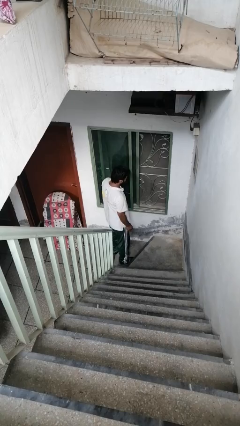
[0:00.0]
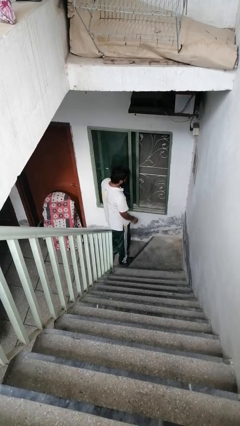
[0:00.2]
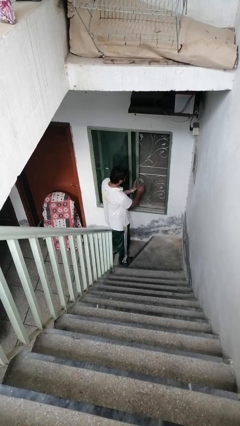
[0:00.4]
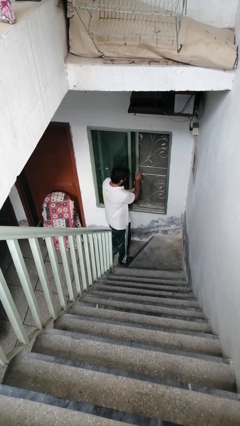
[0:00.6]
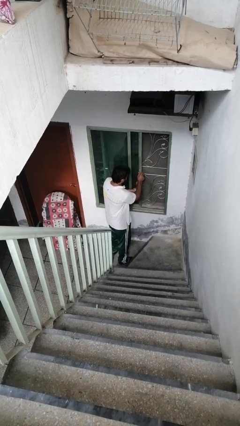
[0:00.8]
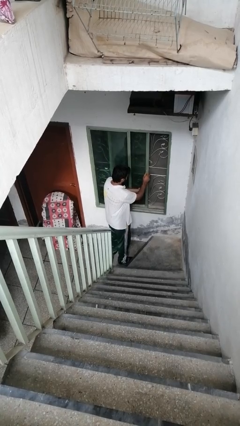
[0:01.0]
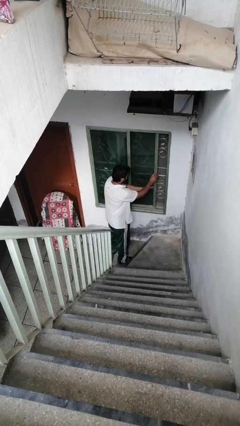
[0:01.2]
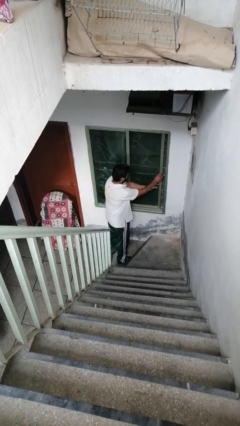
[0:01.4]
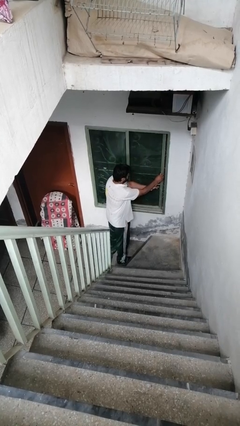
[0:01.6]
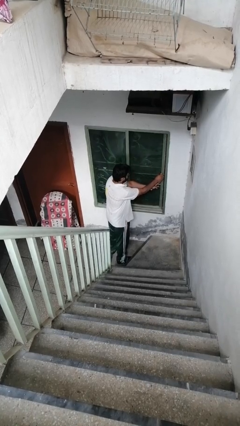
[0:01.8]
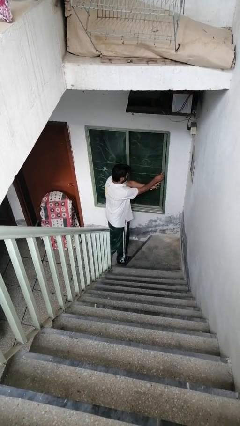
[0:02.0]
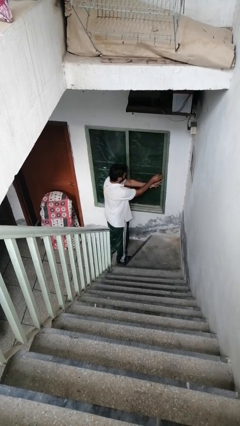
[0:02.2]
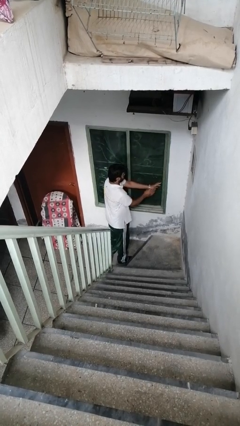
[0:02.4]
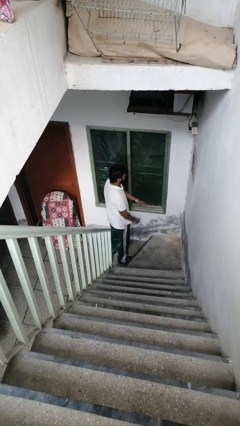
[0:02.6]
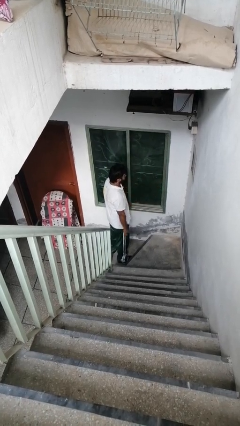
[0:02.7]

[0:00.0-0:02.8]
person closes home window

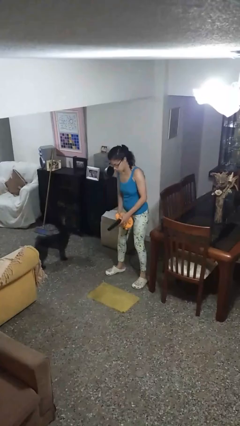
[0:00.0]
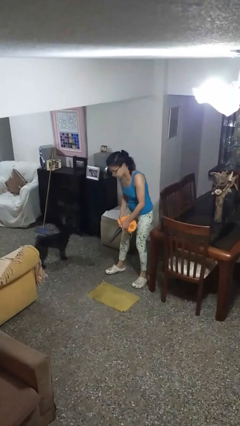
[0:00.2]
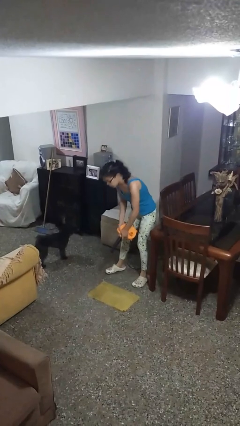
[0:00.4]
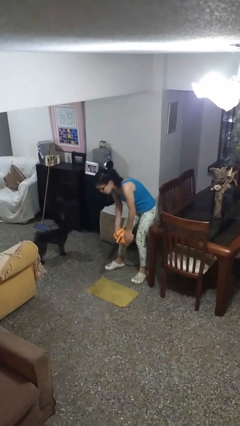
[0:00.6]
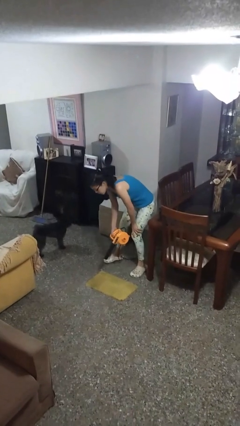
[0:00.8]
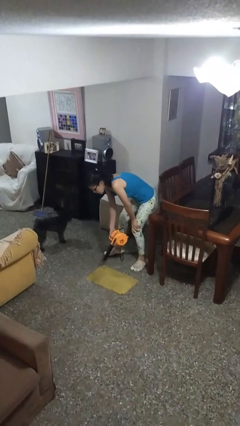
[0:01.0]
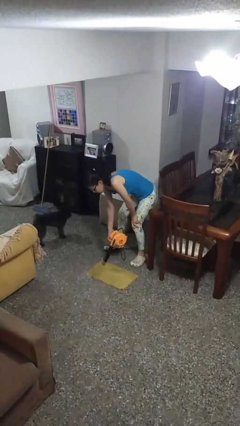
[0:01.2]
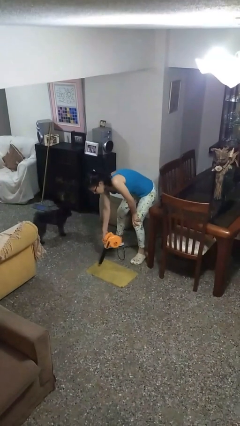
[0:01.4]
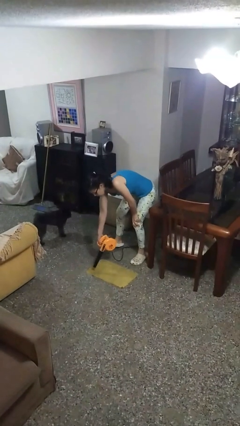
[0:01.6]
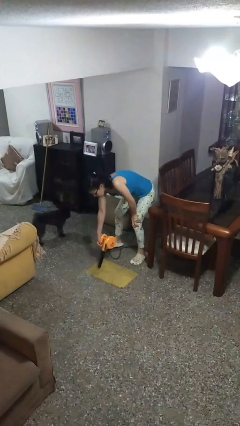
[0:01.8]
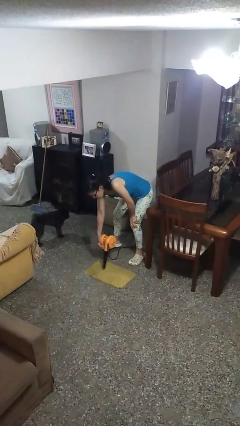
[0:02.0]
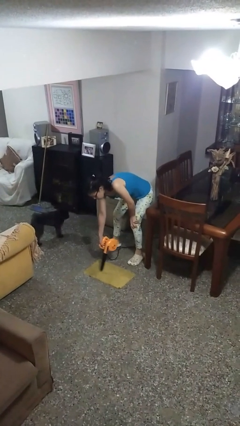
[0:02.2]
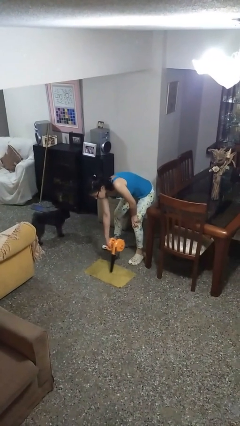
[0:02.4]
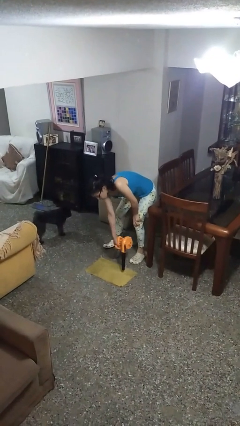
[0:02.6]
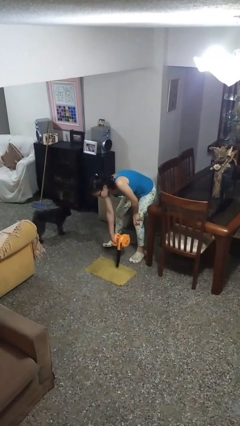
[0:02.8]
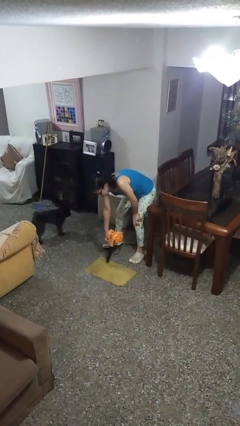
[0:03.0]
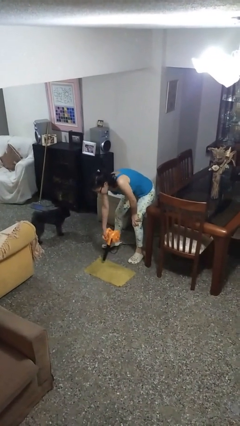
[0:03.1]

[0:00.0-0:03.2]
person vacuums carpet

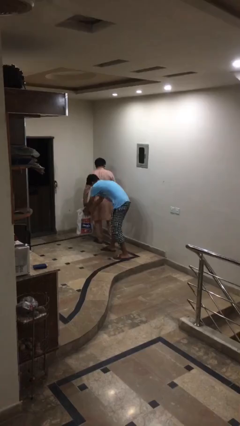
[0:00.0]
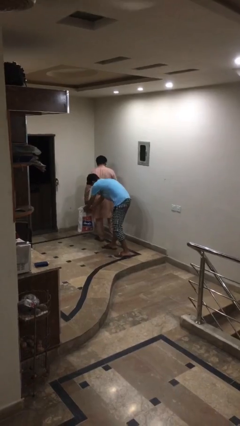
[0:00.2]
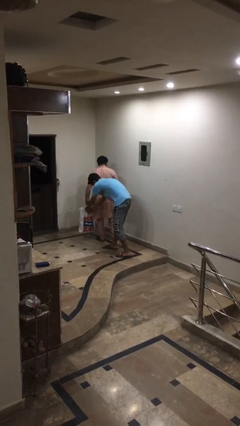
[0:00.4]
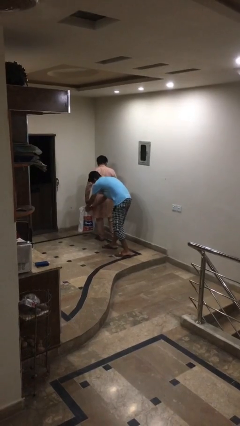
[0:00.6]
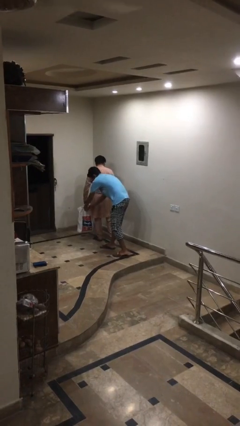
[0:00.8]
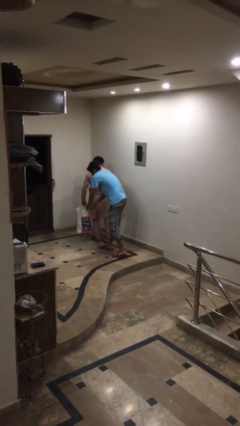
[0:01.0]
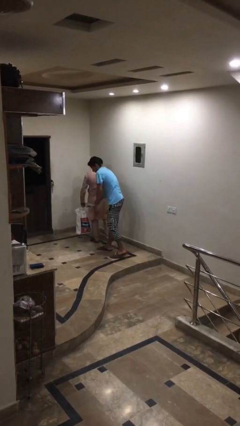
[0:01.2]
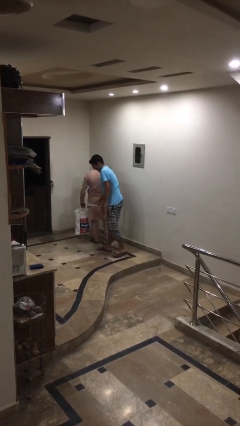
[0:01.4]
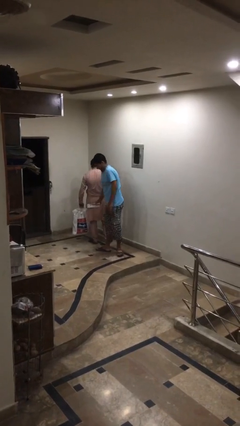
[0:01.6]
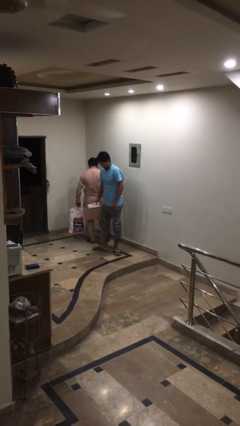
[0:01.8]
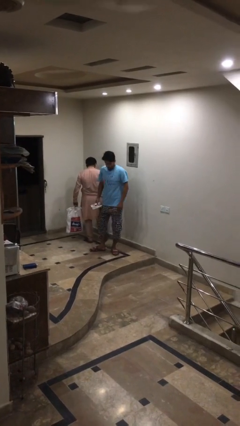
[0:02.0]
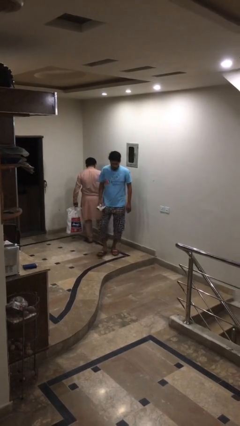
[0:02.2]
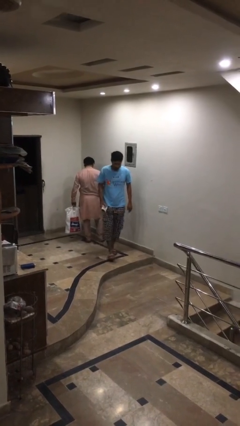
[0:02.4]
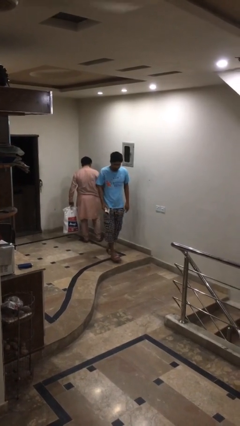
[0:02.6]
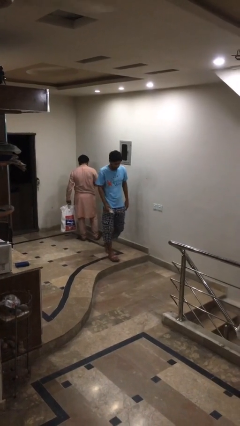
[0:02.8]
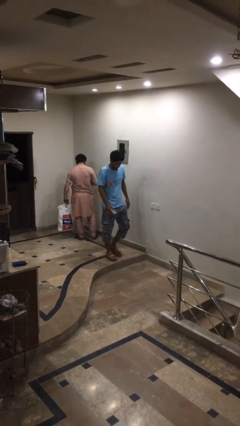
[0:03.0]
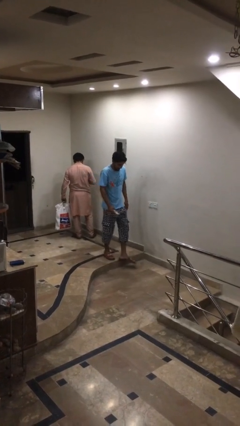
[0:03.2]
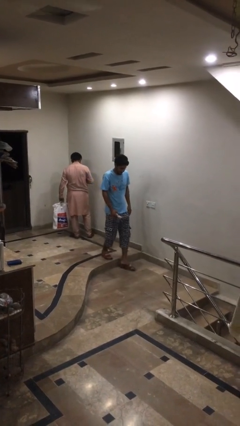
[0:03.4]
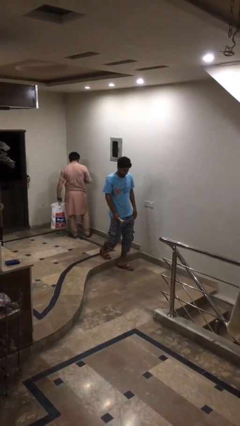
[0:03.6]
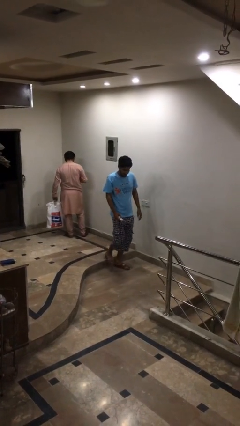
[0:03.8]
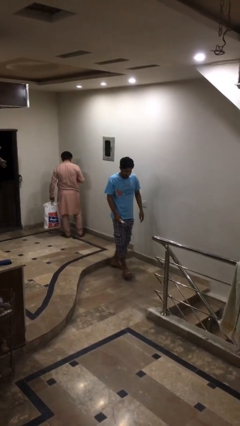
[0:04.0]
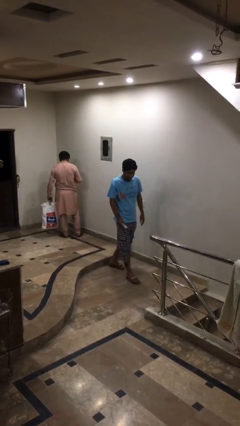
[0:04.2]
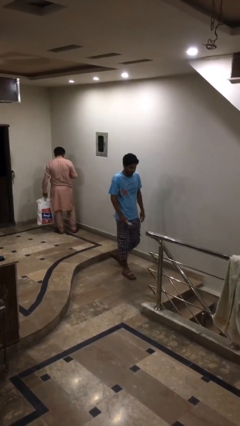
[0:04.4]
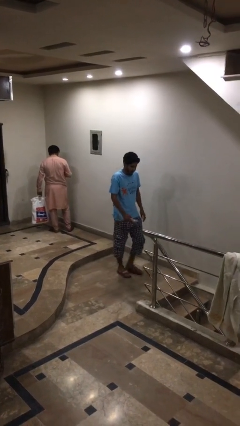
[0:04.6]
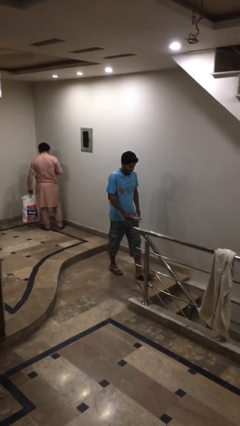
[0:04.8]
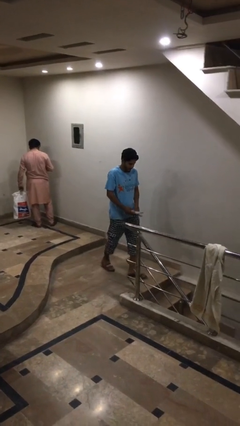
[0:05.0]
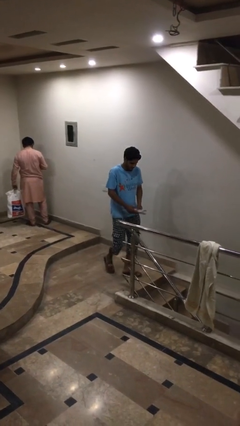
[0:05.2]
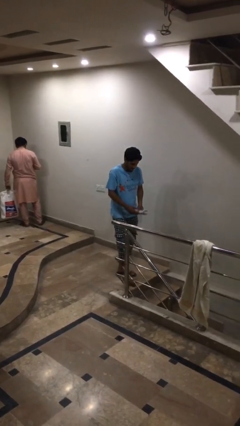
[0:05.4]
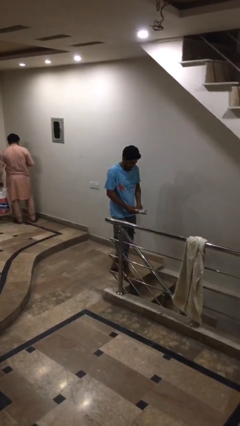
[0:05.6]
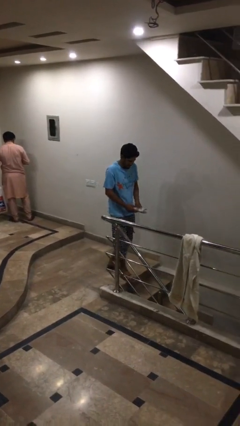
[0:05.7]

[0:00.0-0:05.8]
person steals object from person

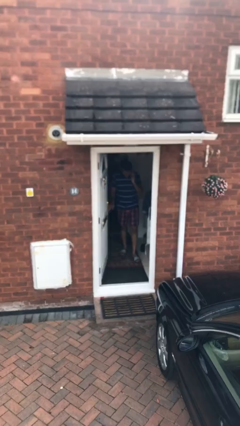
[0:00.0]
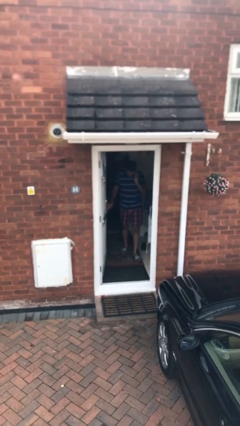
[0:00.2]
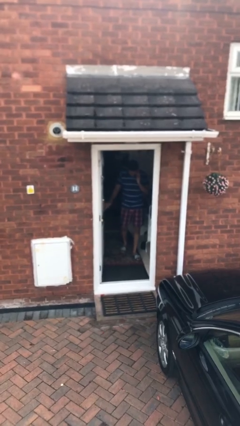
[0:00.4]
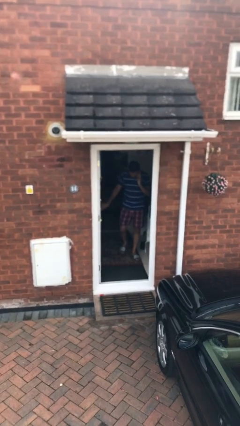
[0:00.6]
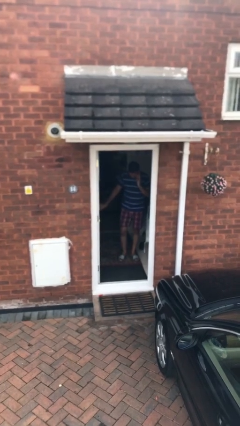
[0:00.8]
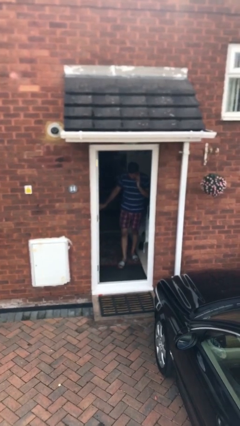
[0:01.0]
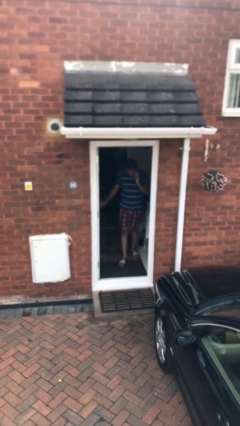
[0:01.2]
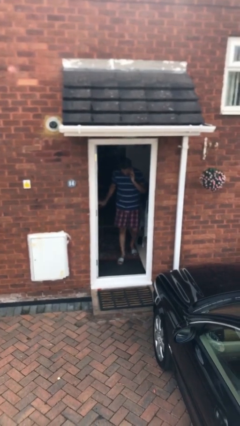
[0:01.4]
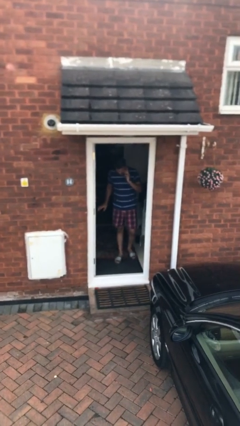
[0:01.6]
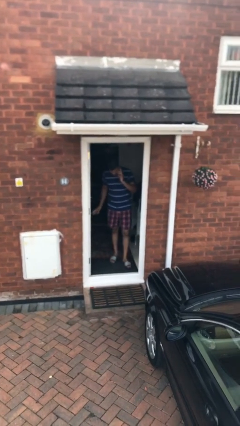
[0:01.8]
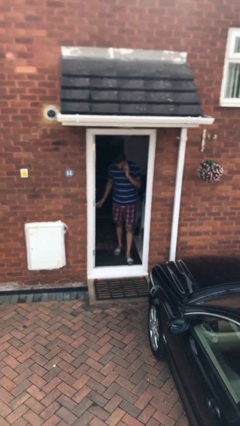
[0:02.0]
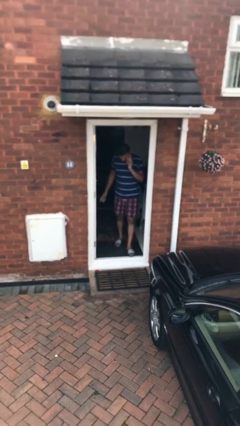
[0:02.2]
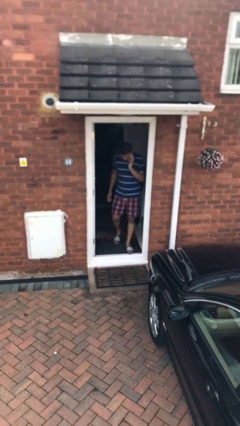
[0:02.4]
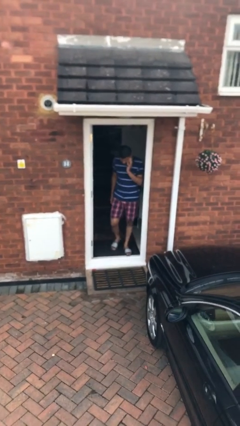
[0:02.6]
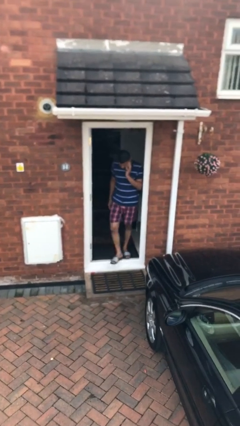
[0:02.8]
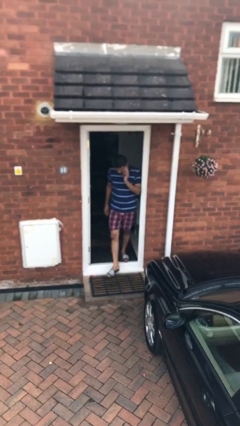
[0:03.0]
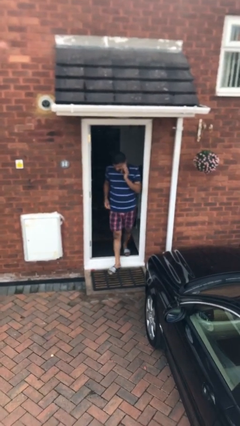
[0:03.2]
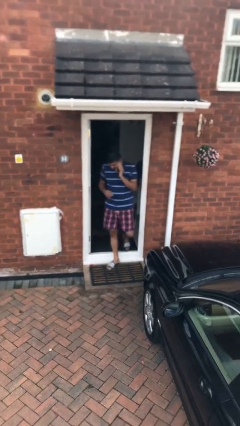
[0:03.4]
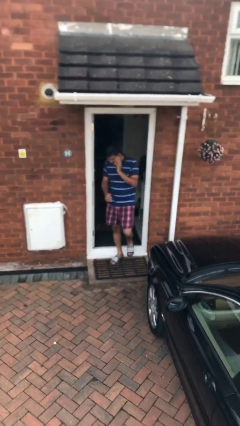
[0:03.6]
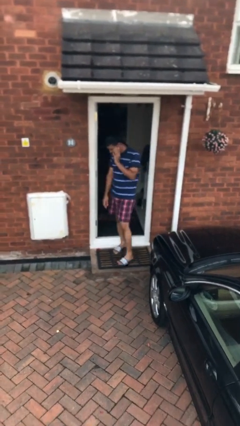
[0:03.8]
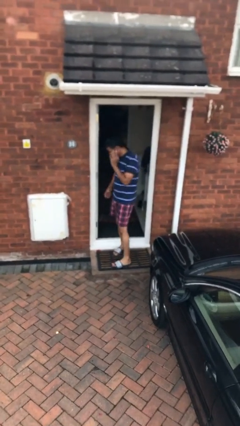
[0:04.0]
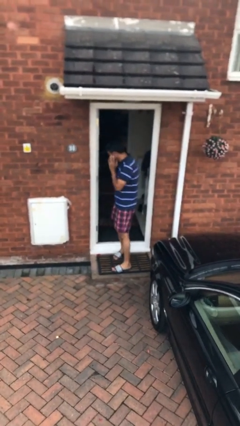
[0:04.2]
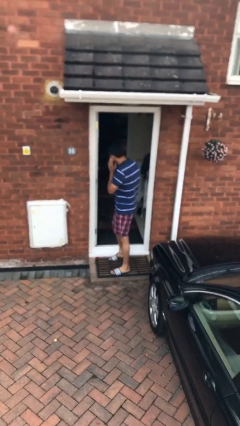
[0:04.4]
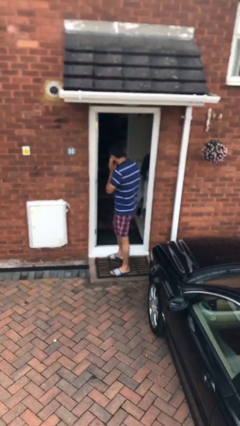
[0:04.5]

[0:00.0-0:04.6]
person enters scene through structure

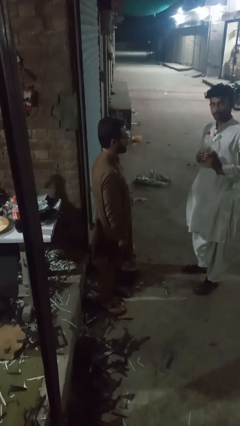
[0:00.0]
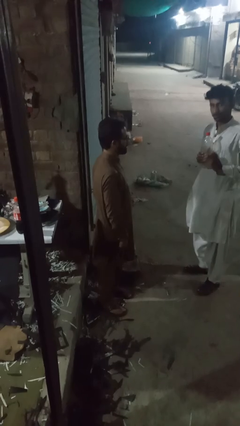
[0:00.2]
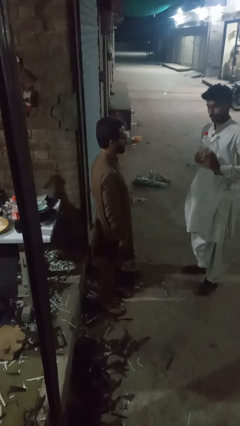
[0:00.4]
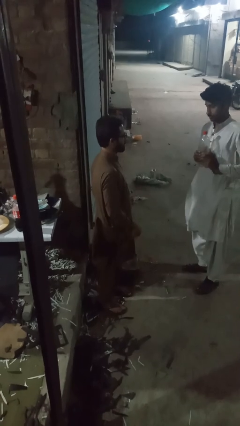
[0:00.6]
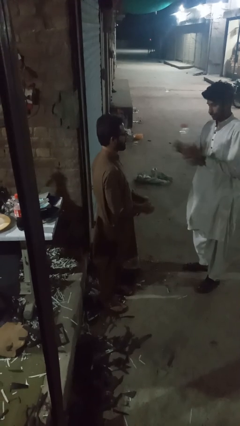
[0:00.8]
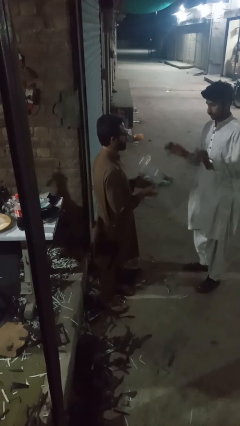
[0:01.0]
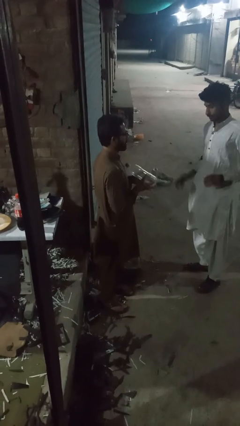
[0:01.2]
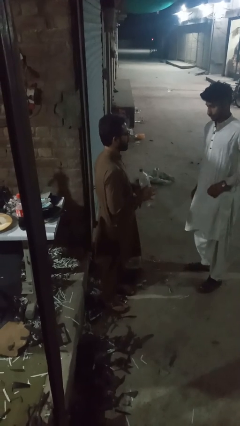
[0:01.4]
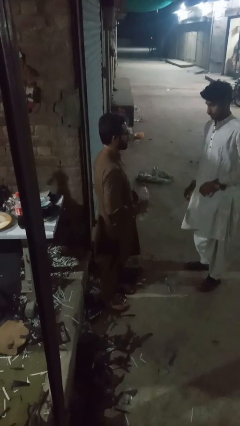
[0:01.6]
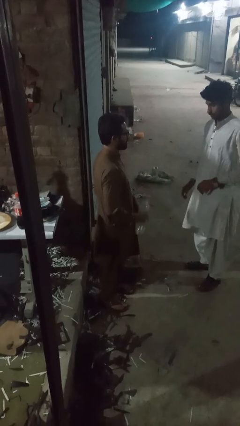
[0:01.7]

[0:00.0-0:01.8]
person catches object from person
